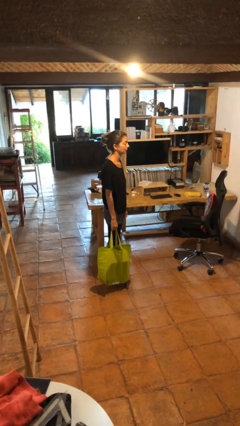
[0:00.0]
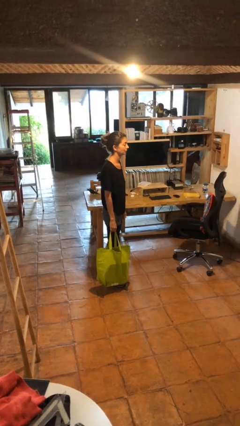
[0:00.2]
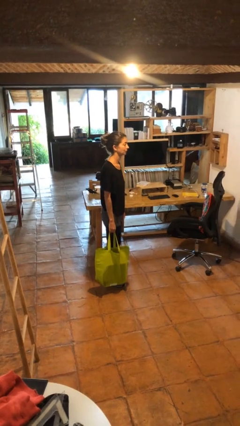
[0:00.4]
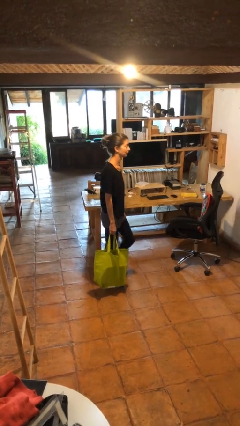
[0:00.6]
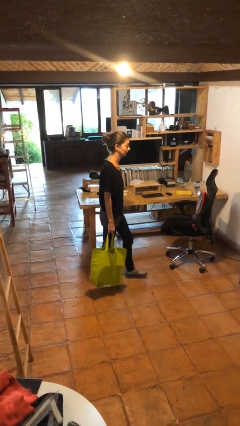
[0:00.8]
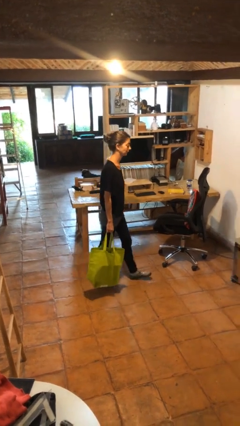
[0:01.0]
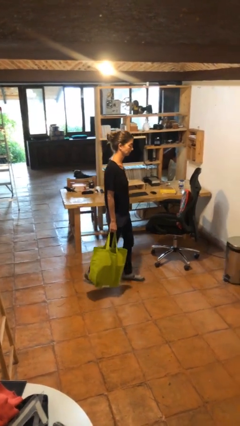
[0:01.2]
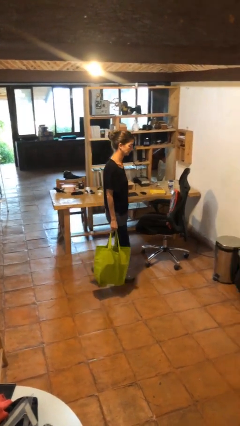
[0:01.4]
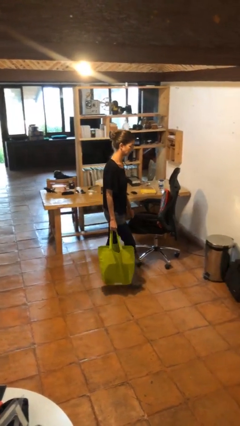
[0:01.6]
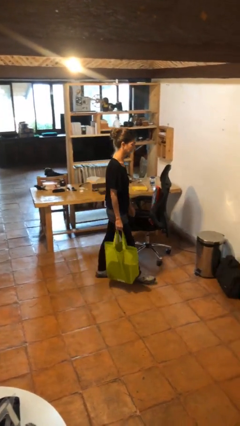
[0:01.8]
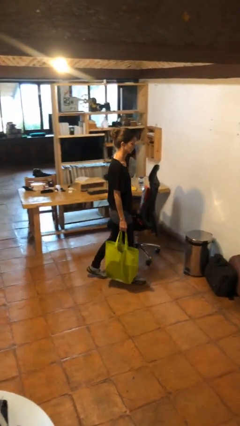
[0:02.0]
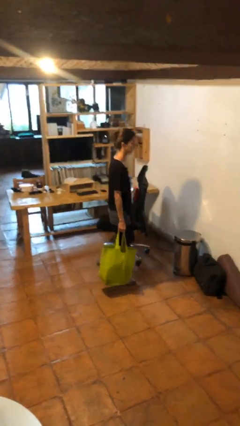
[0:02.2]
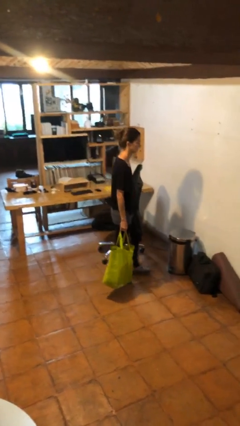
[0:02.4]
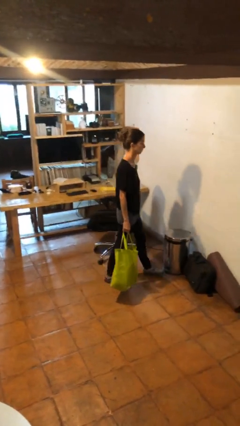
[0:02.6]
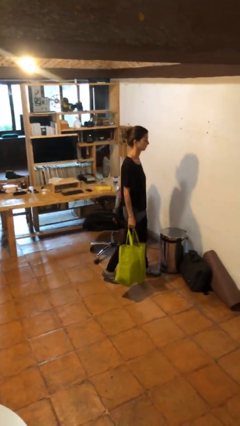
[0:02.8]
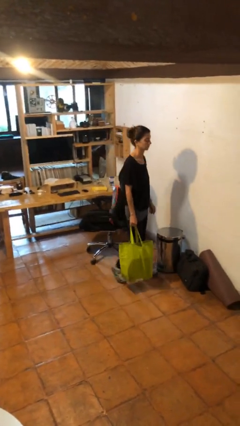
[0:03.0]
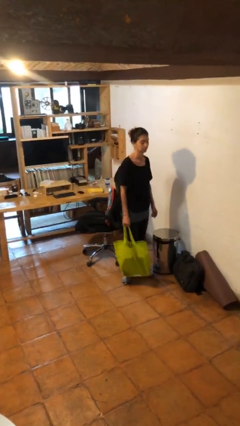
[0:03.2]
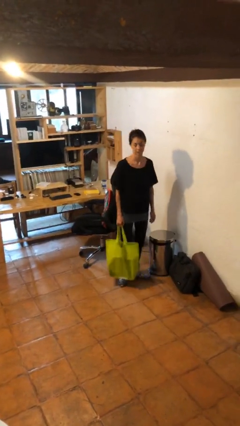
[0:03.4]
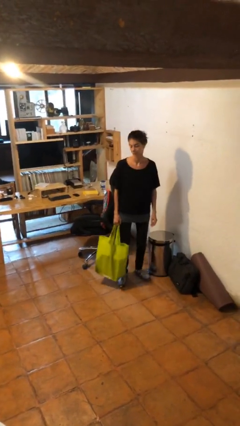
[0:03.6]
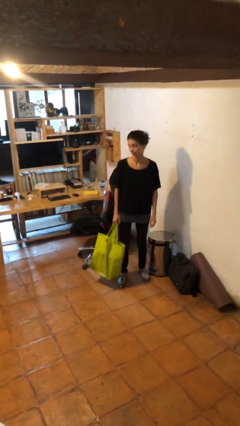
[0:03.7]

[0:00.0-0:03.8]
person carries groceries

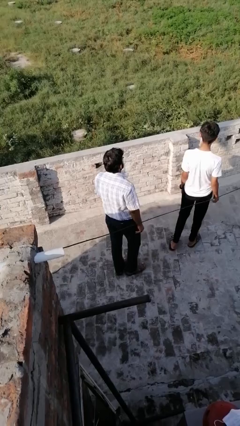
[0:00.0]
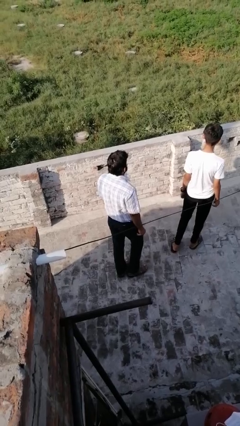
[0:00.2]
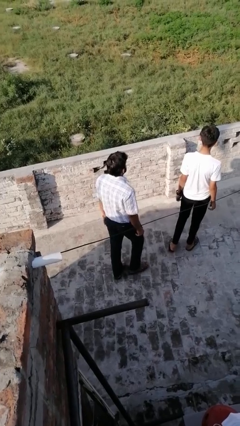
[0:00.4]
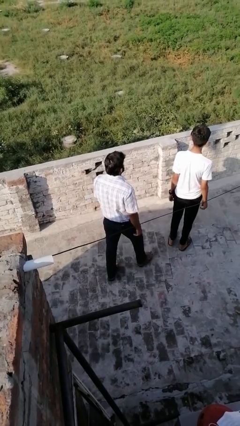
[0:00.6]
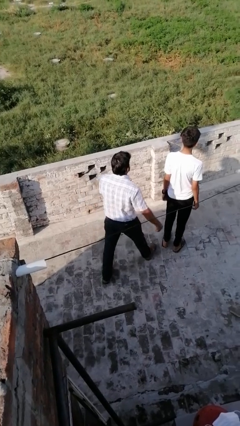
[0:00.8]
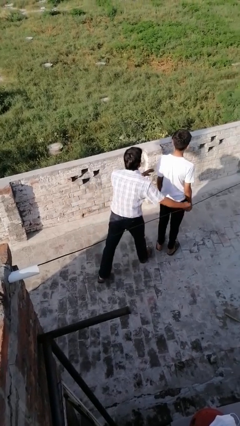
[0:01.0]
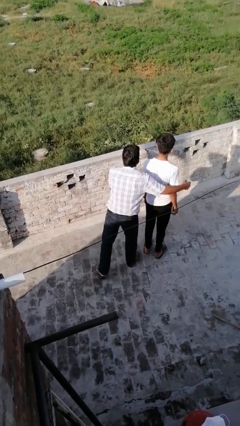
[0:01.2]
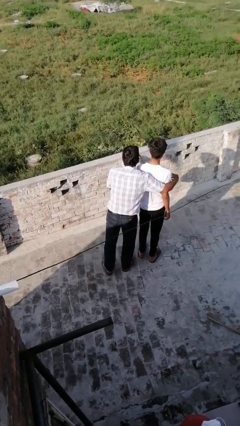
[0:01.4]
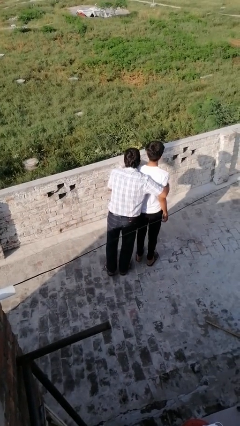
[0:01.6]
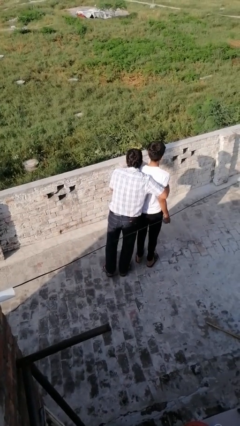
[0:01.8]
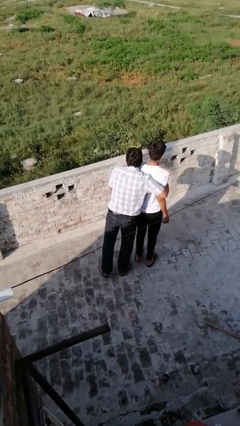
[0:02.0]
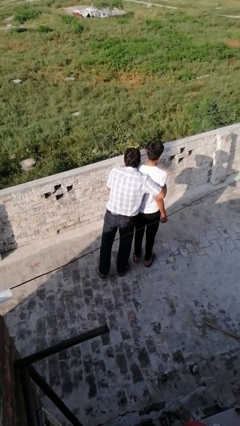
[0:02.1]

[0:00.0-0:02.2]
person hugs person from behind

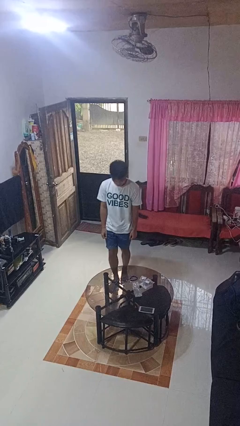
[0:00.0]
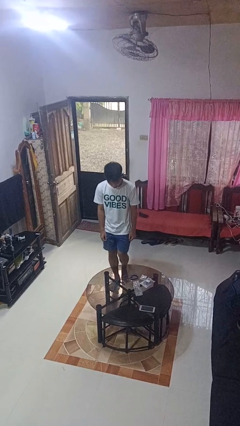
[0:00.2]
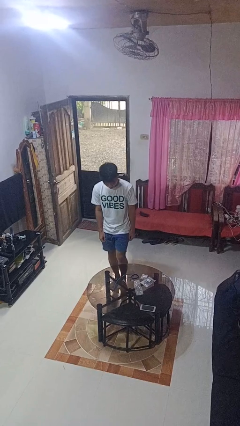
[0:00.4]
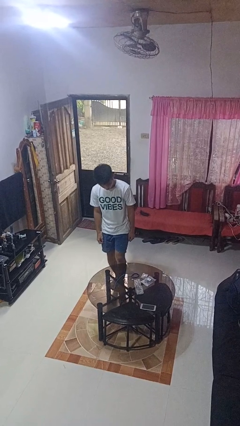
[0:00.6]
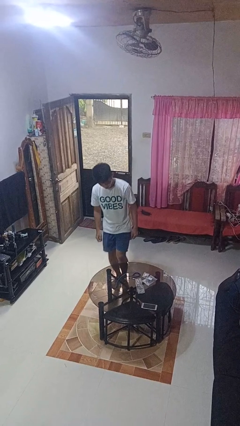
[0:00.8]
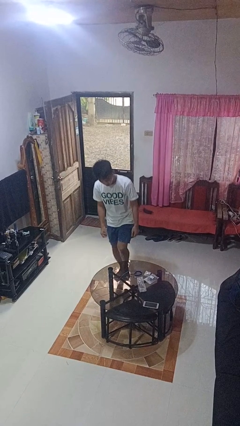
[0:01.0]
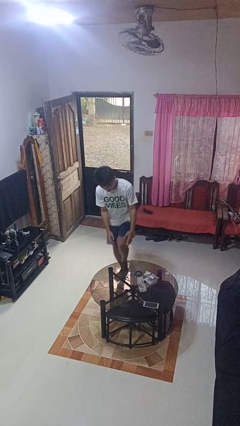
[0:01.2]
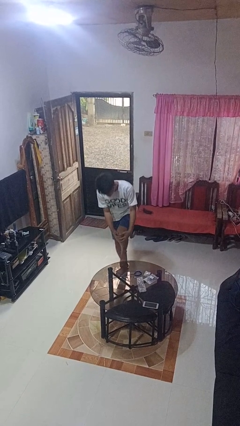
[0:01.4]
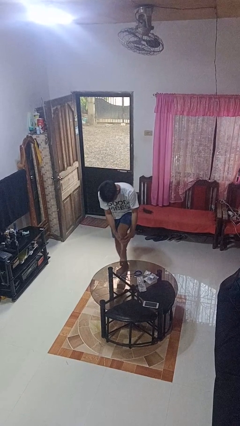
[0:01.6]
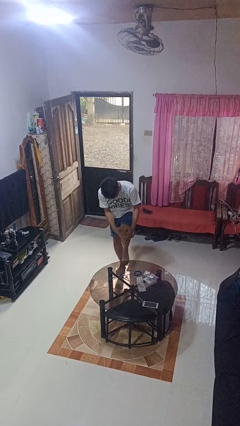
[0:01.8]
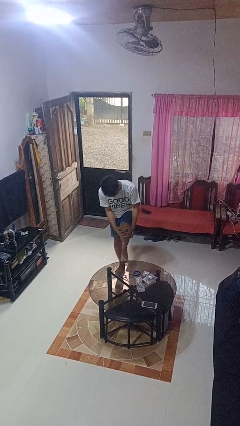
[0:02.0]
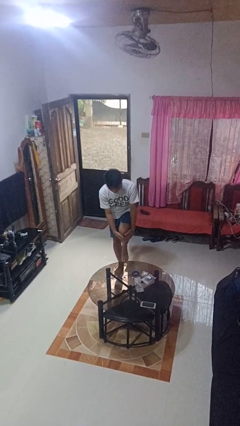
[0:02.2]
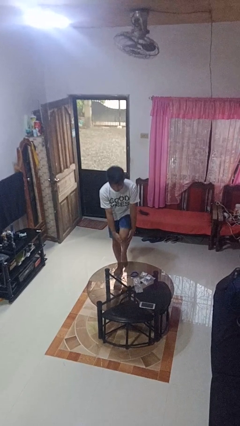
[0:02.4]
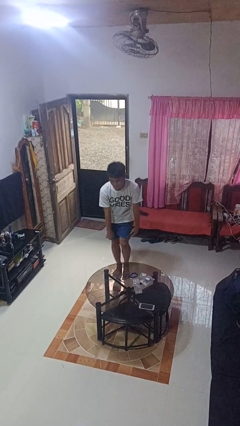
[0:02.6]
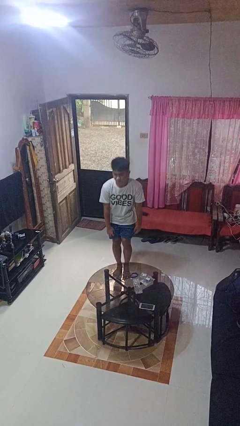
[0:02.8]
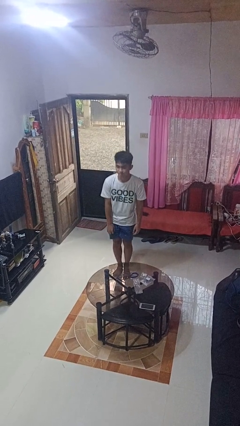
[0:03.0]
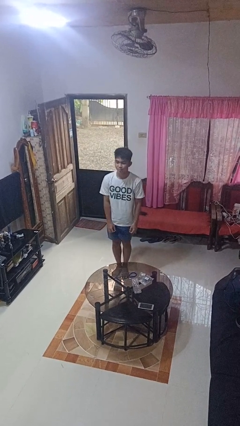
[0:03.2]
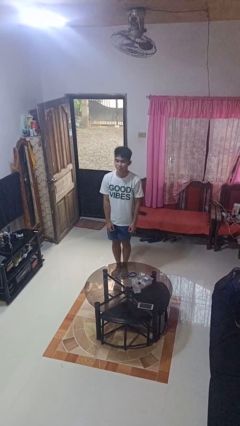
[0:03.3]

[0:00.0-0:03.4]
person bumps into table

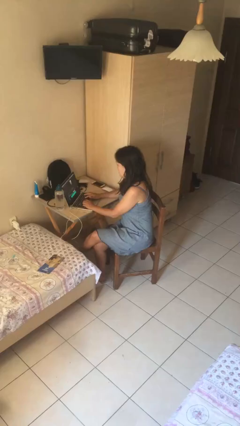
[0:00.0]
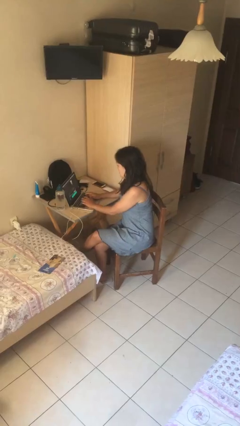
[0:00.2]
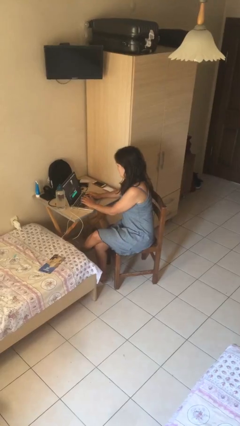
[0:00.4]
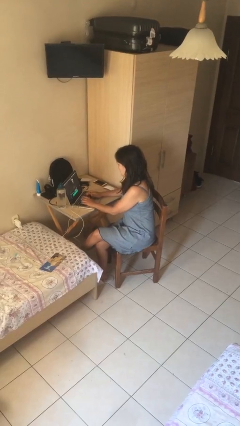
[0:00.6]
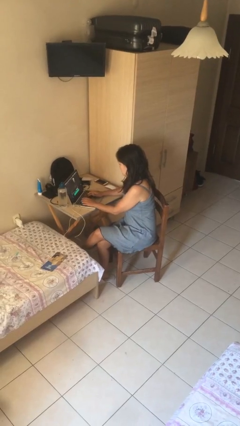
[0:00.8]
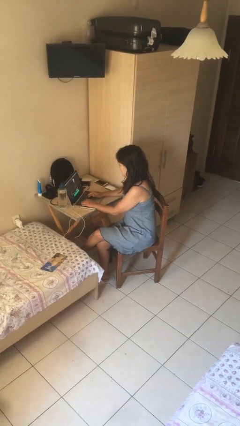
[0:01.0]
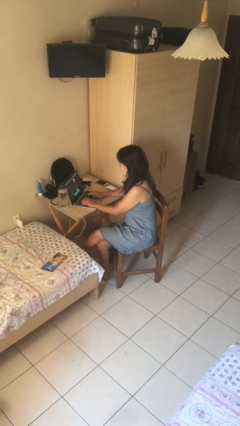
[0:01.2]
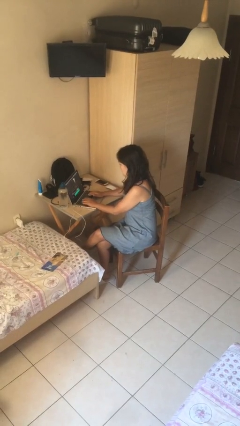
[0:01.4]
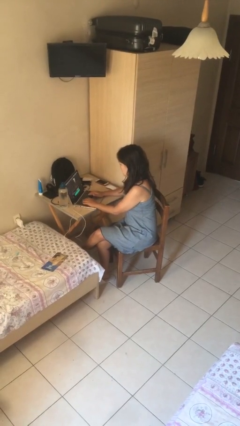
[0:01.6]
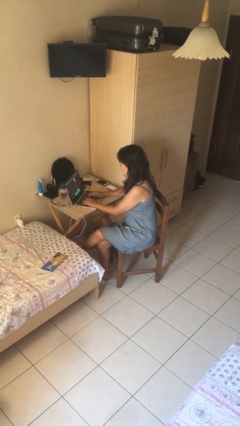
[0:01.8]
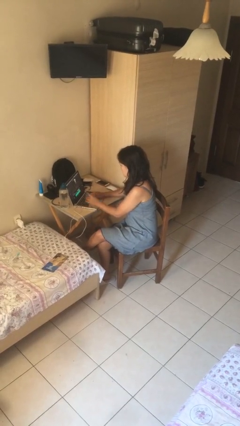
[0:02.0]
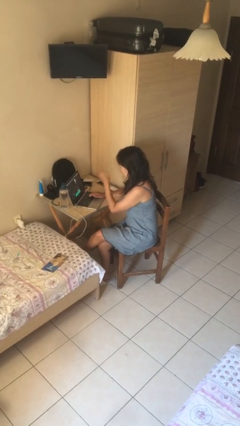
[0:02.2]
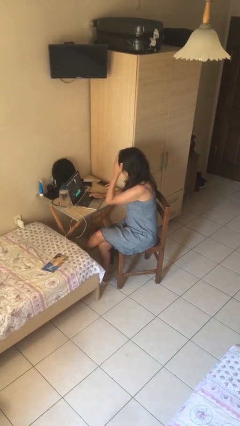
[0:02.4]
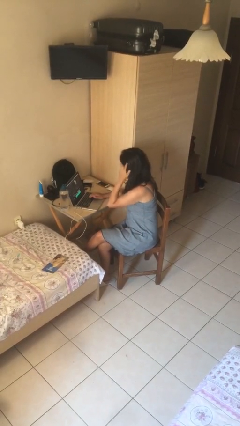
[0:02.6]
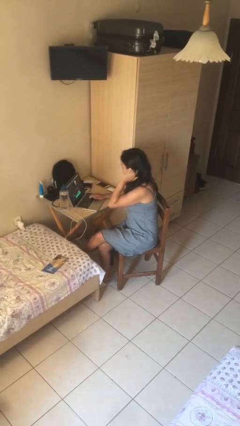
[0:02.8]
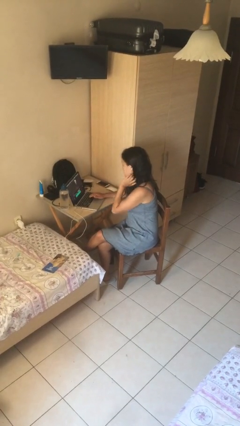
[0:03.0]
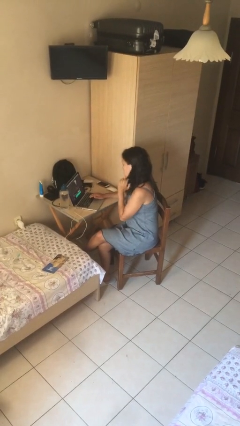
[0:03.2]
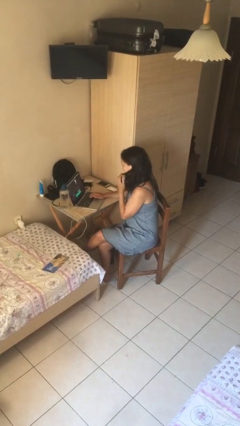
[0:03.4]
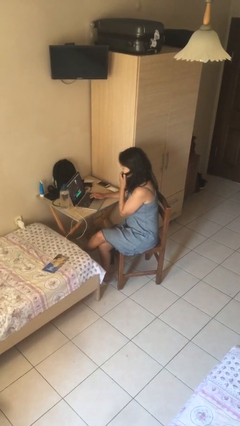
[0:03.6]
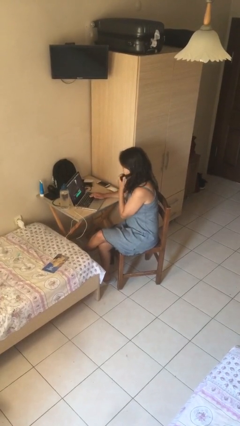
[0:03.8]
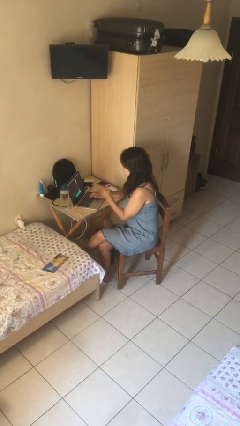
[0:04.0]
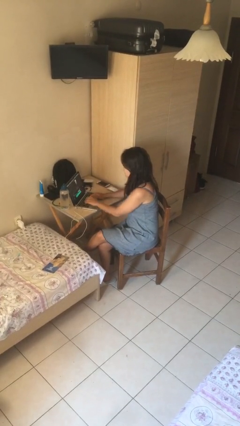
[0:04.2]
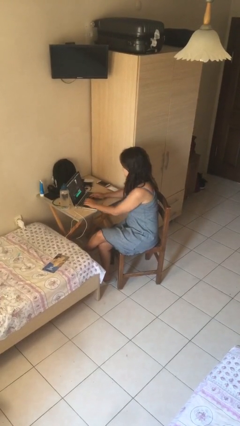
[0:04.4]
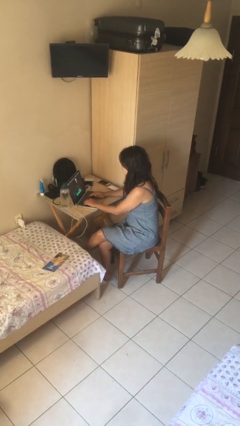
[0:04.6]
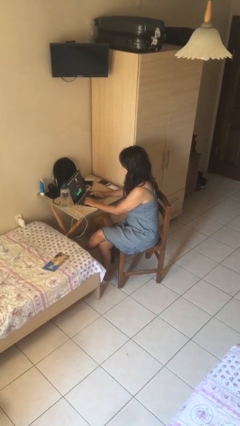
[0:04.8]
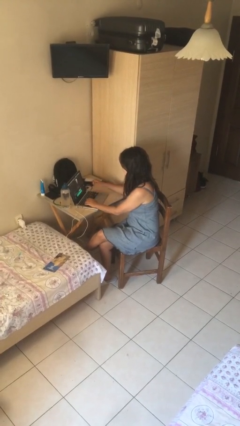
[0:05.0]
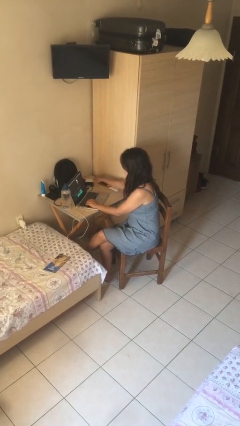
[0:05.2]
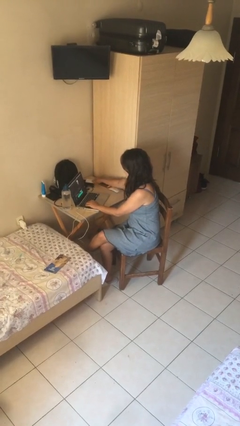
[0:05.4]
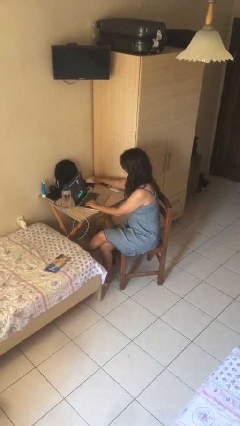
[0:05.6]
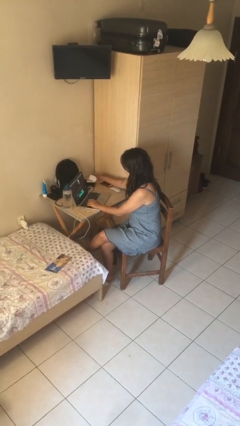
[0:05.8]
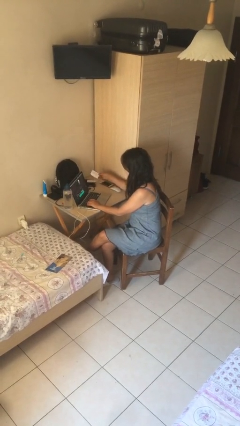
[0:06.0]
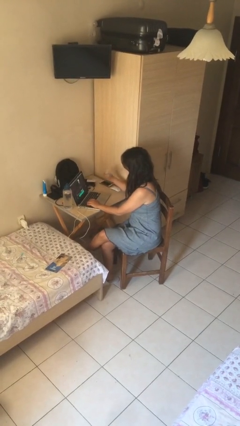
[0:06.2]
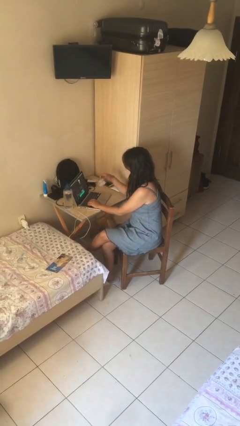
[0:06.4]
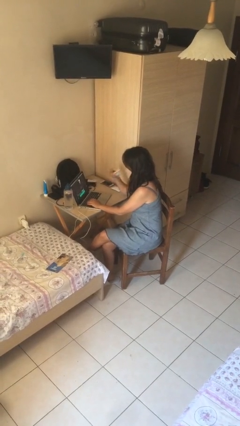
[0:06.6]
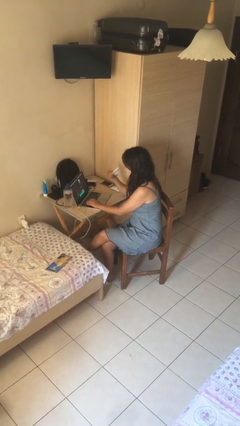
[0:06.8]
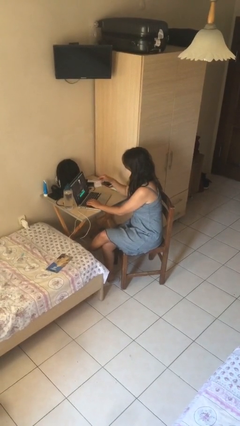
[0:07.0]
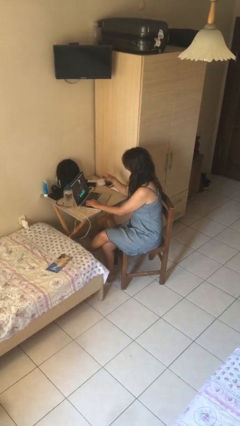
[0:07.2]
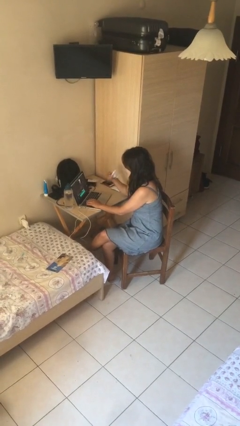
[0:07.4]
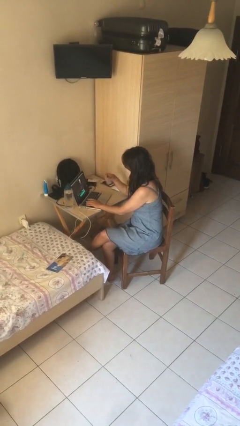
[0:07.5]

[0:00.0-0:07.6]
person interacts with laptop

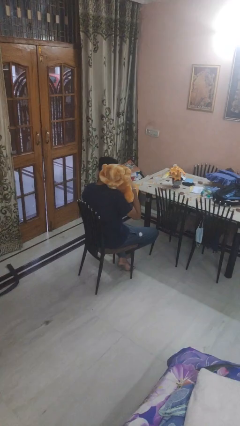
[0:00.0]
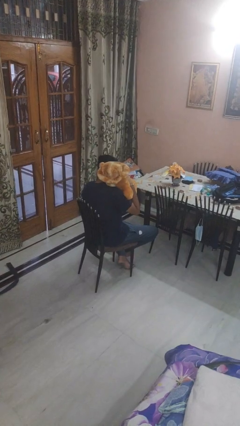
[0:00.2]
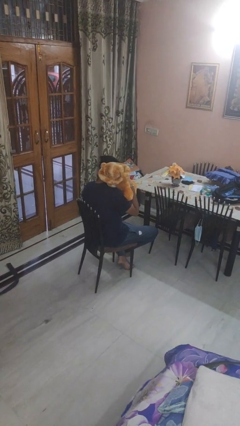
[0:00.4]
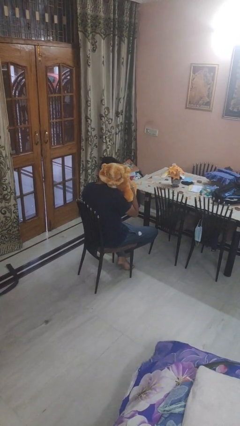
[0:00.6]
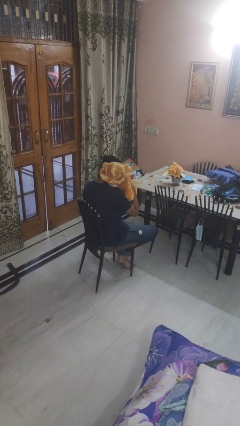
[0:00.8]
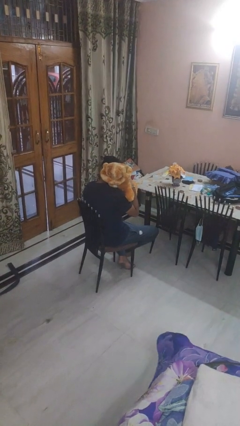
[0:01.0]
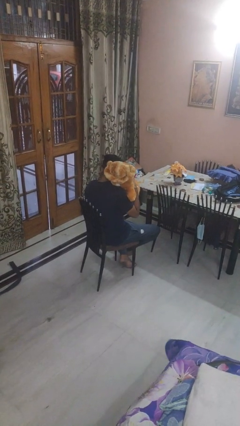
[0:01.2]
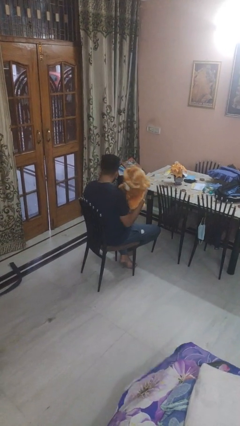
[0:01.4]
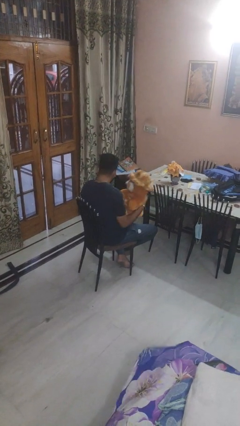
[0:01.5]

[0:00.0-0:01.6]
person hugs stuffed animal
